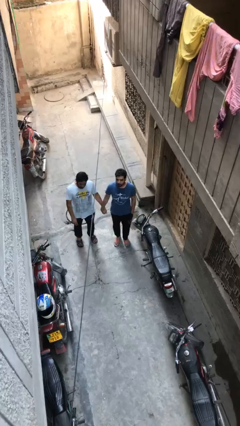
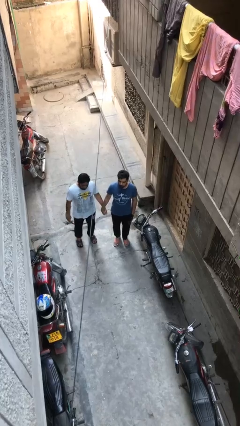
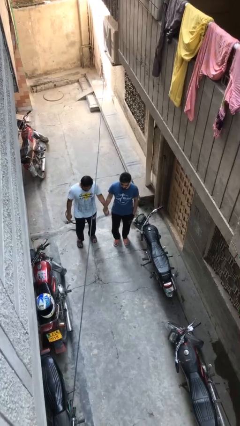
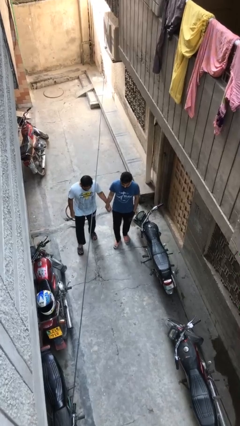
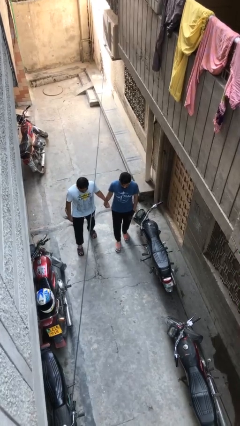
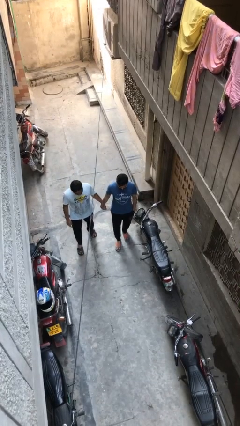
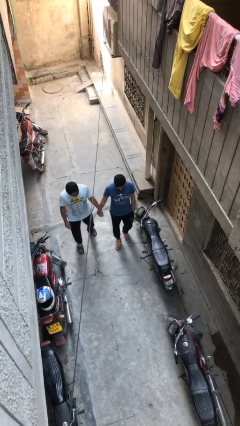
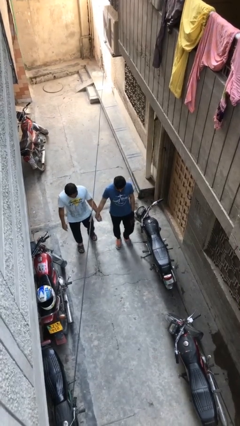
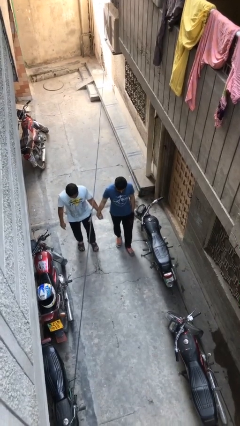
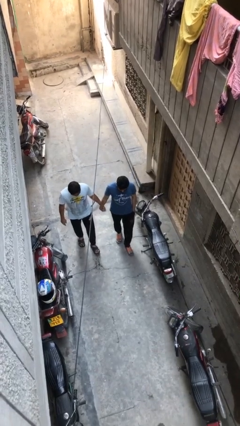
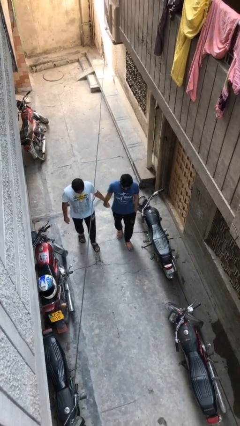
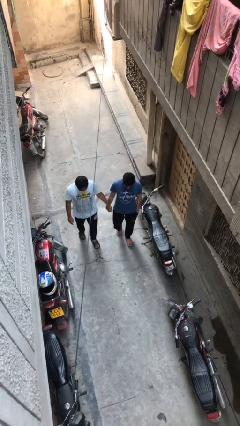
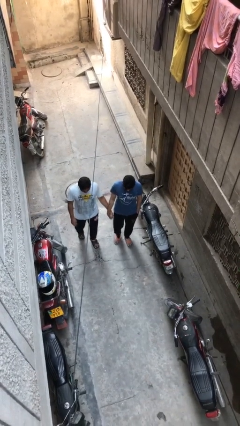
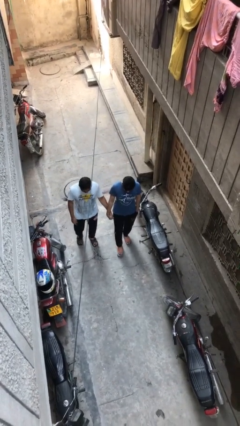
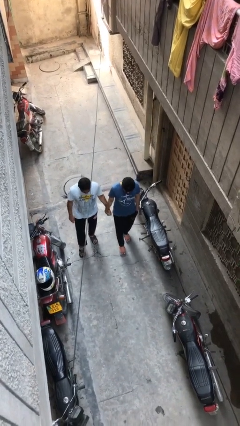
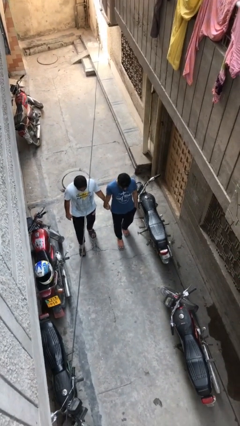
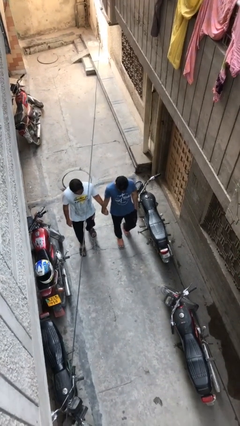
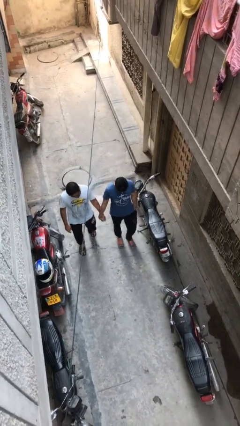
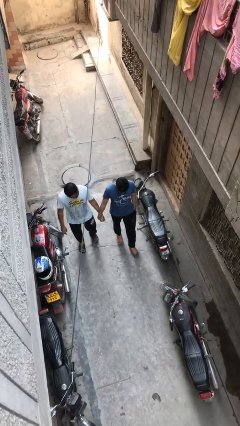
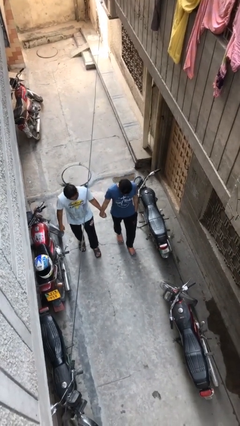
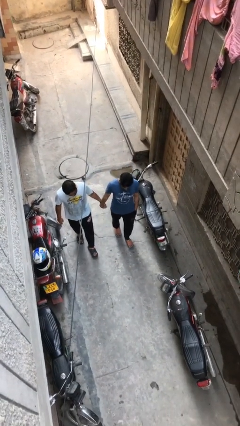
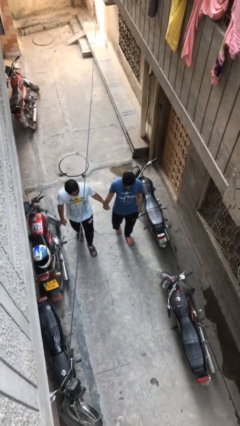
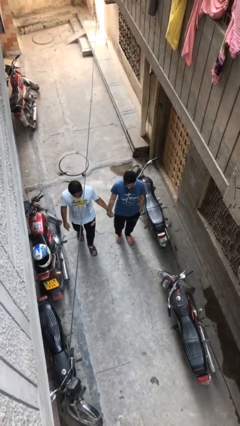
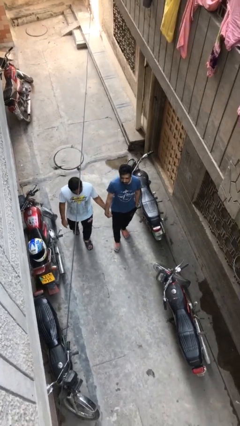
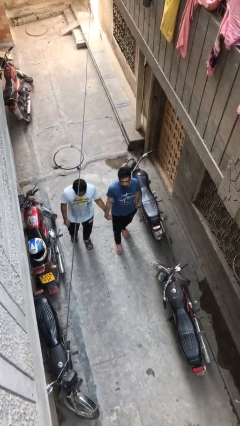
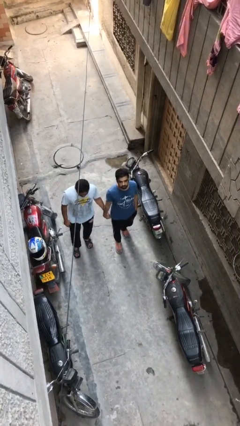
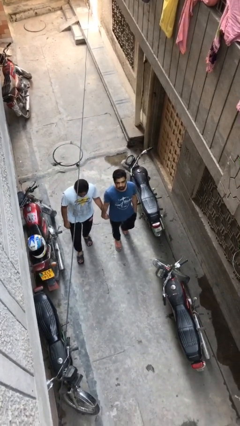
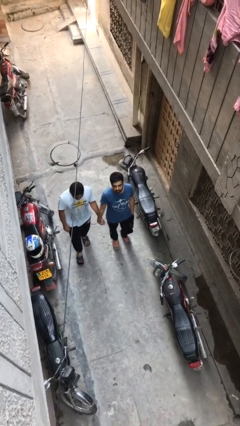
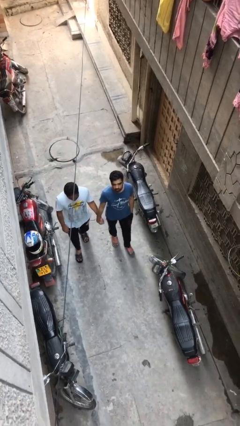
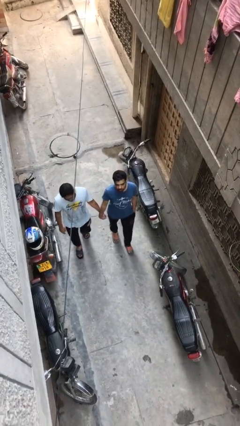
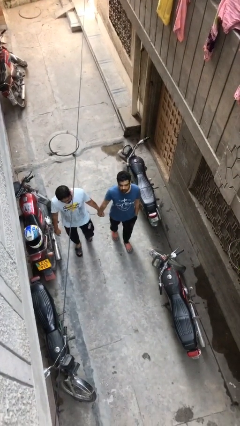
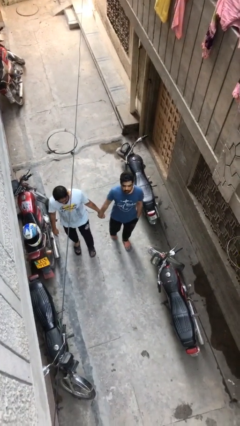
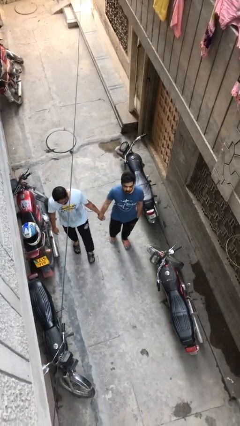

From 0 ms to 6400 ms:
person holds hand

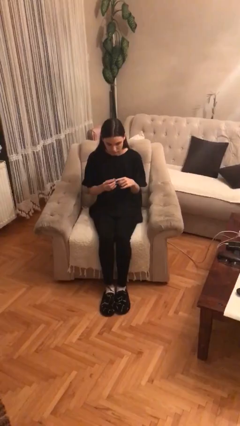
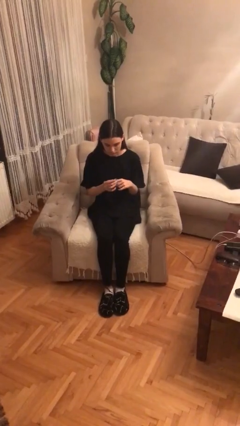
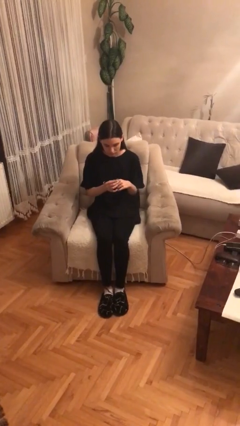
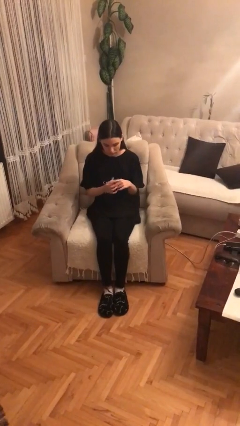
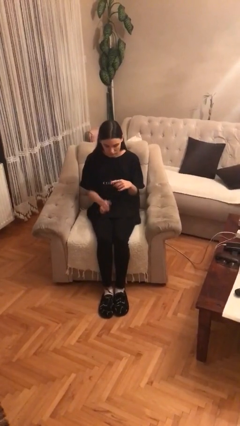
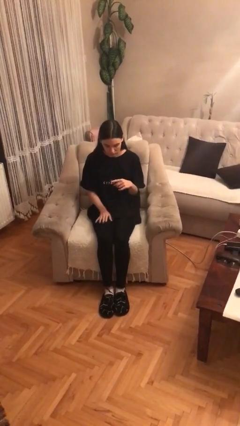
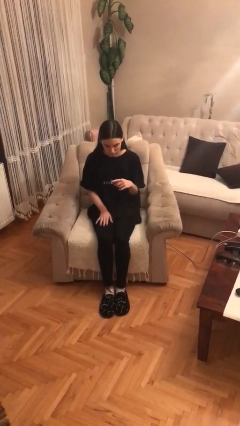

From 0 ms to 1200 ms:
person puts on ring

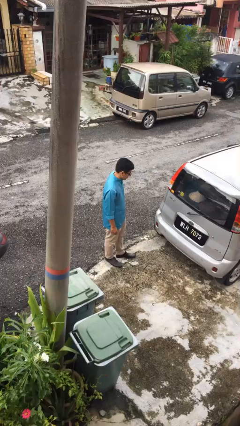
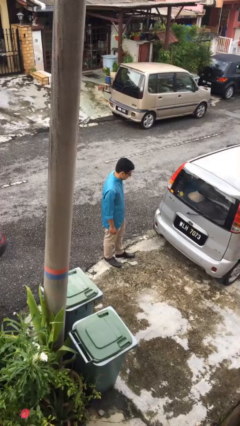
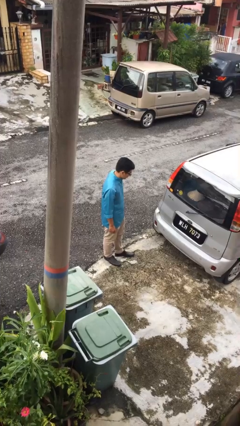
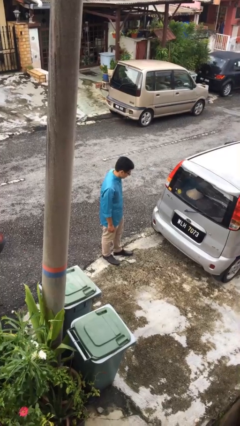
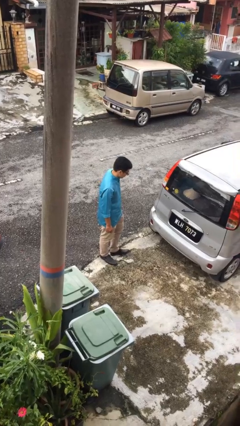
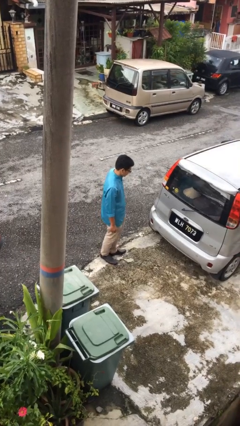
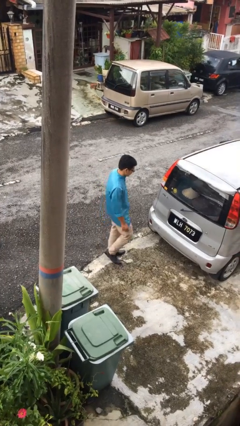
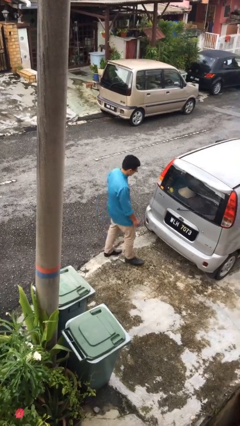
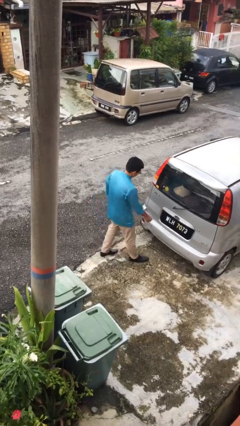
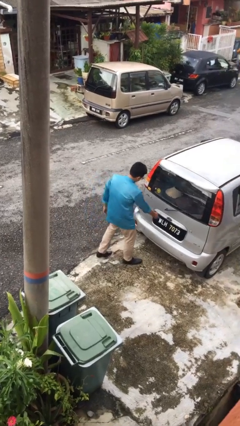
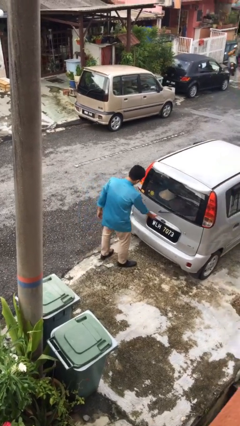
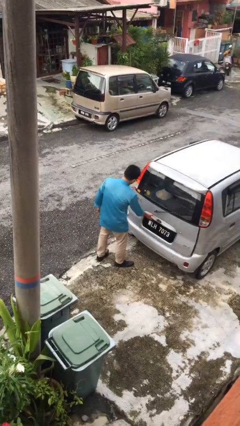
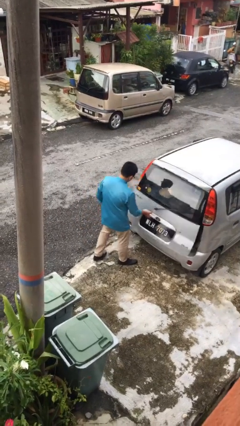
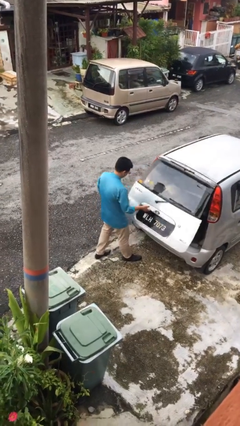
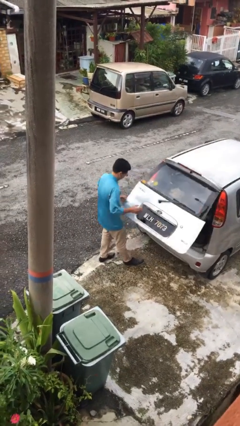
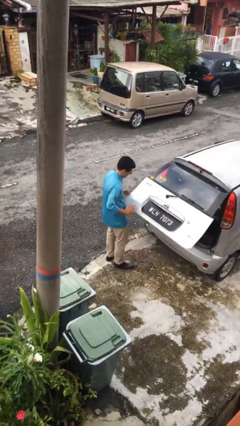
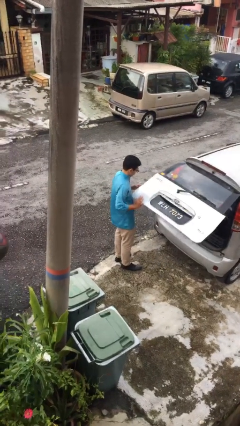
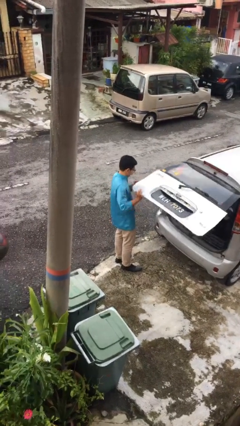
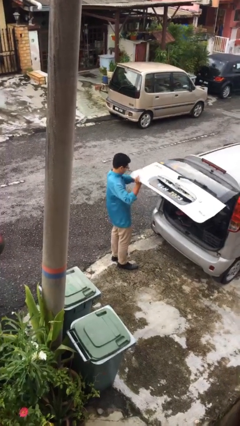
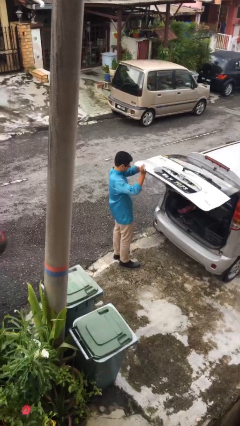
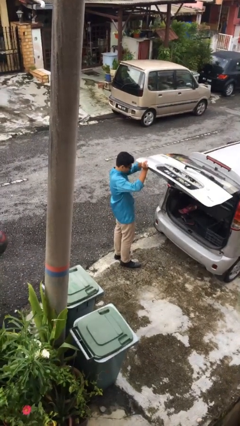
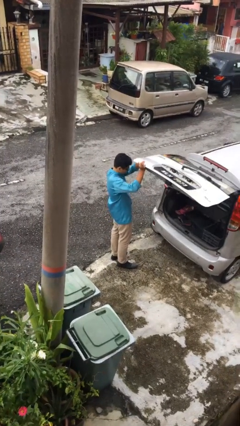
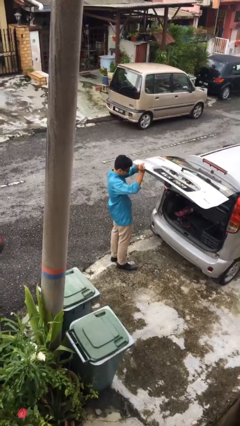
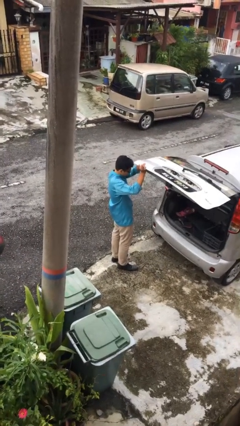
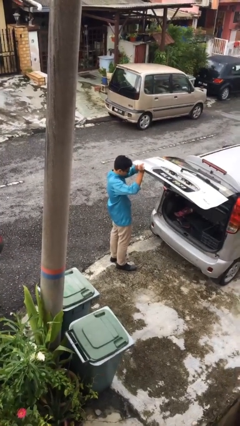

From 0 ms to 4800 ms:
person opens car trunk

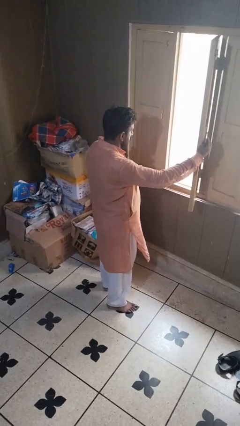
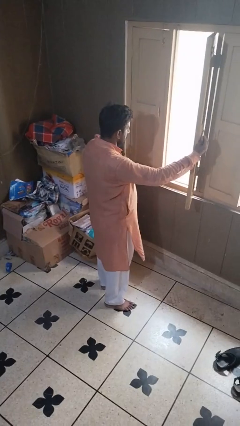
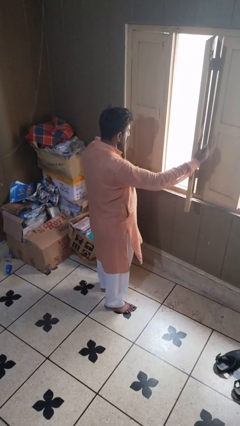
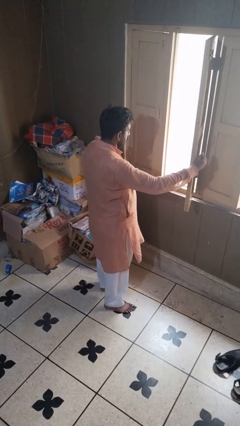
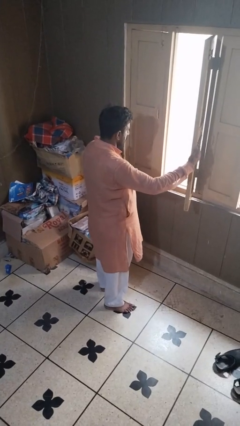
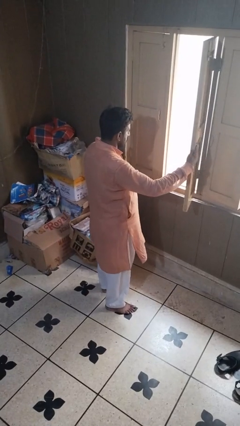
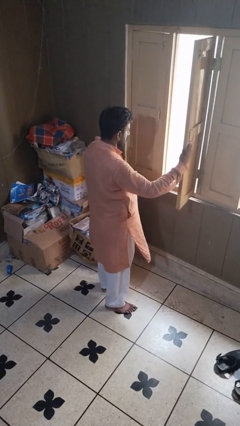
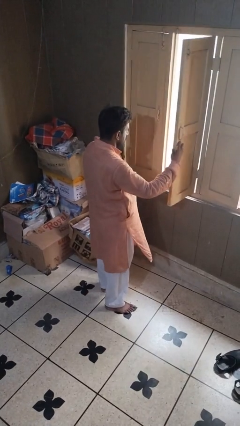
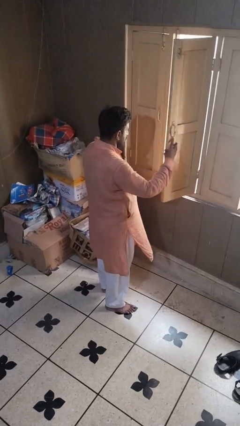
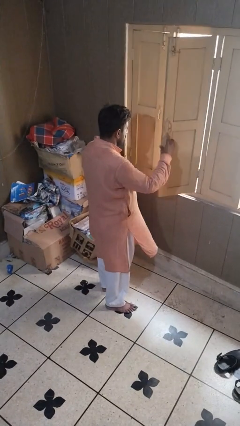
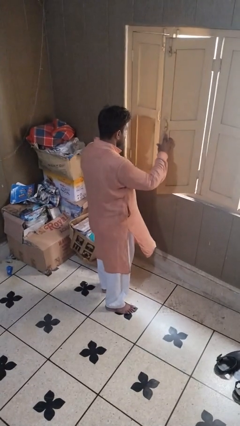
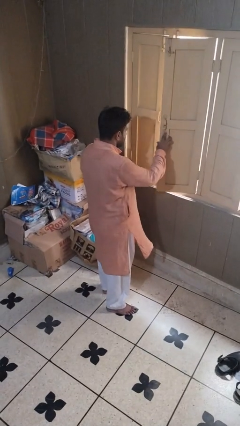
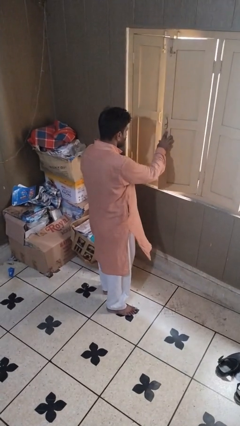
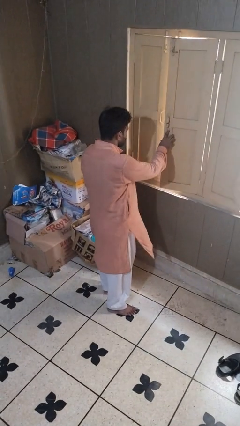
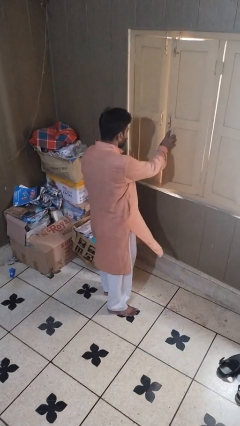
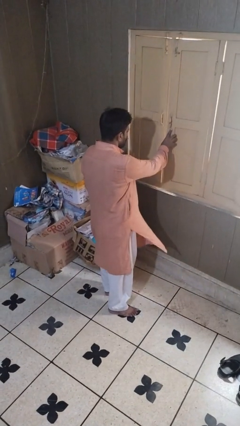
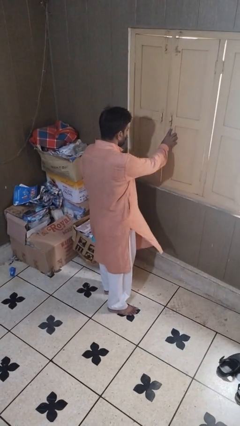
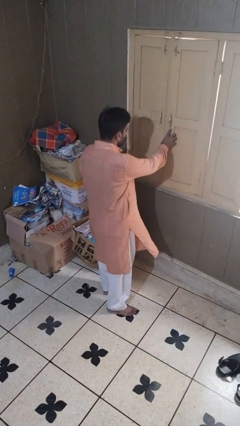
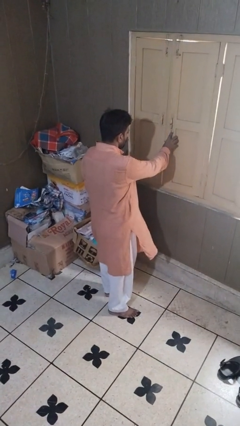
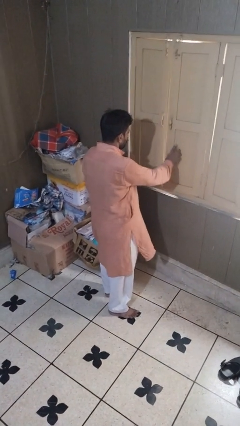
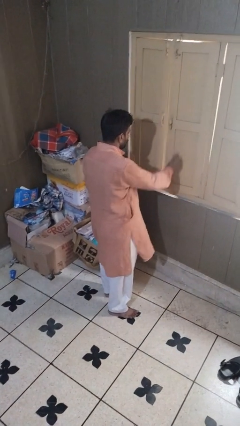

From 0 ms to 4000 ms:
person closes home window

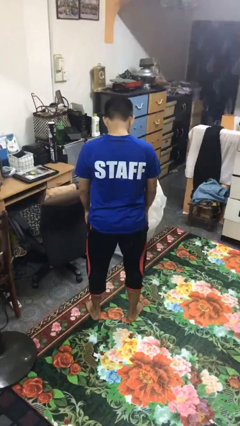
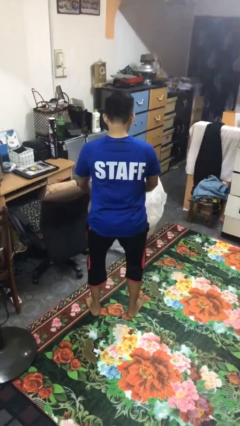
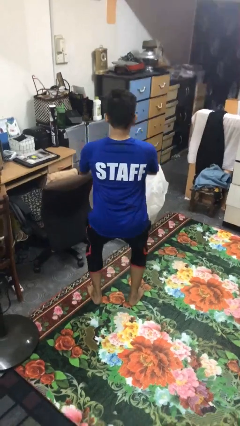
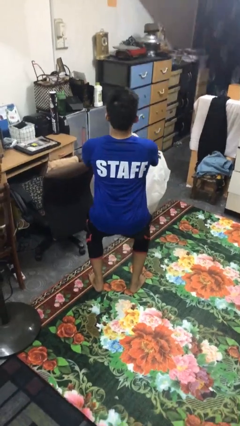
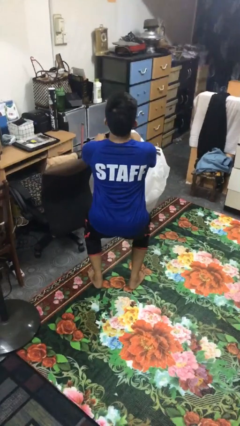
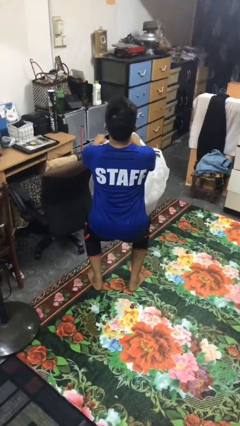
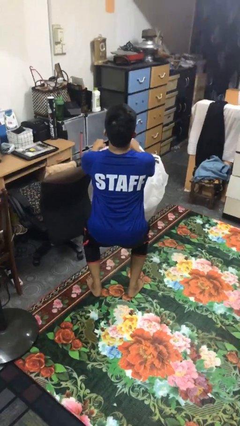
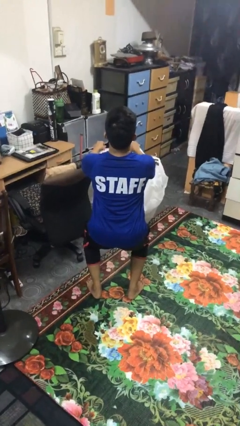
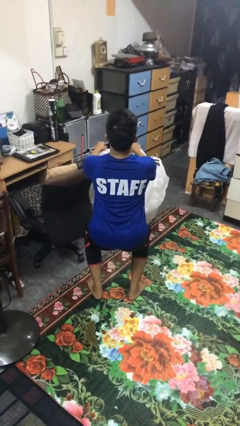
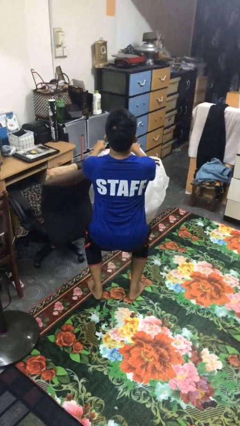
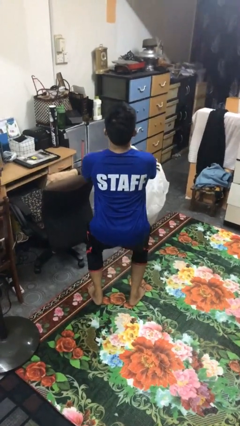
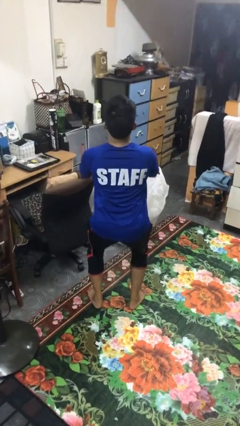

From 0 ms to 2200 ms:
person squats
